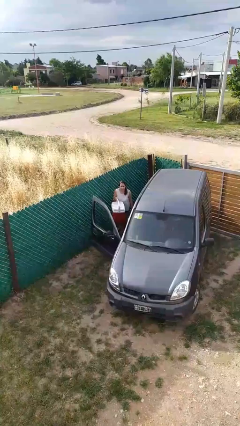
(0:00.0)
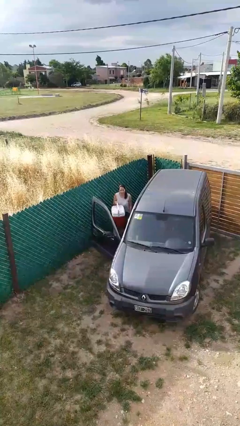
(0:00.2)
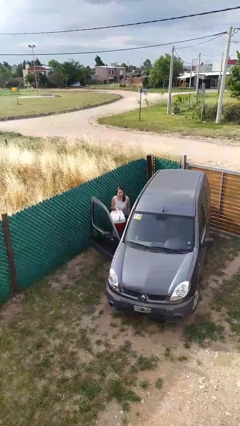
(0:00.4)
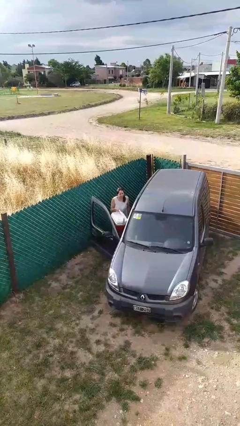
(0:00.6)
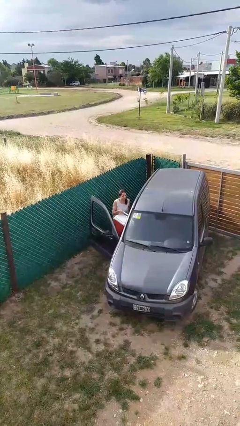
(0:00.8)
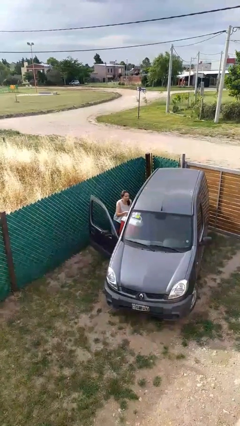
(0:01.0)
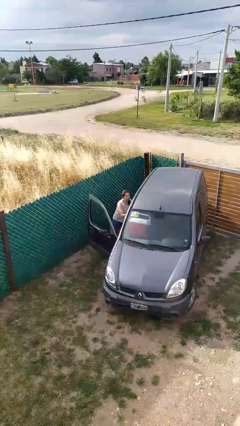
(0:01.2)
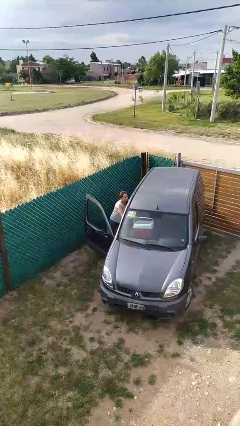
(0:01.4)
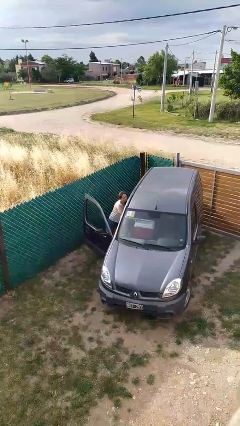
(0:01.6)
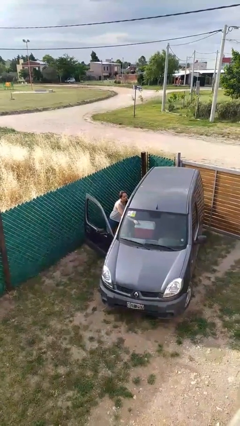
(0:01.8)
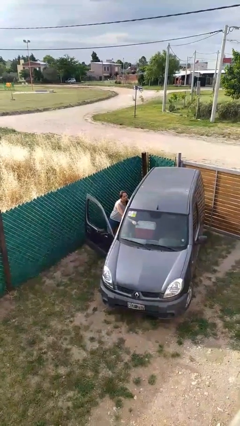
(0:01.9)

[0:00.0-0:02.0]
person loads car

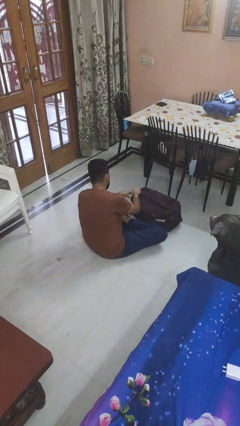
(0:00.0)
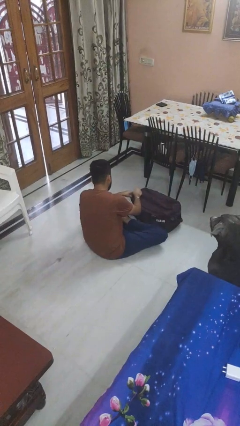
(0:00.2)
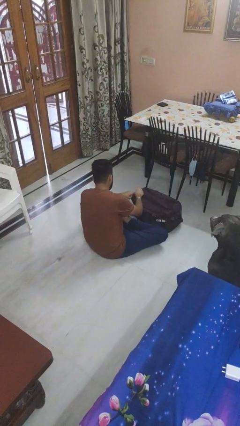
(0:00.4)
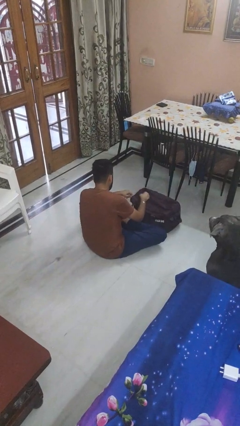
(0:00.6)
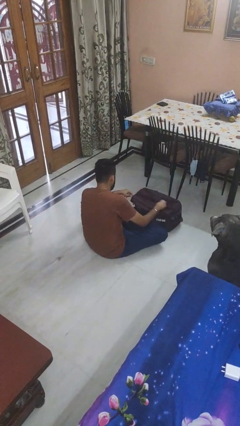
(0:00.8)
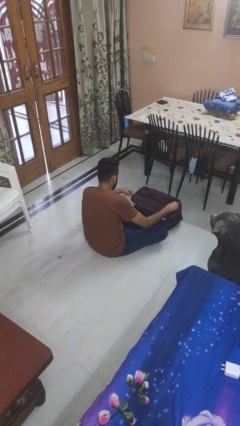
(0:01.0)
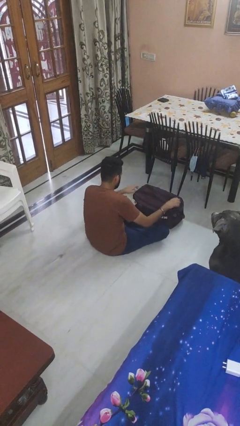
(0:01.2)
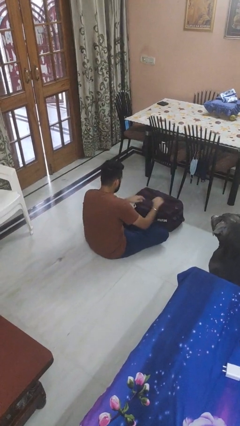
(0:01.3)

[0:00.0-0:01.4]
person opens suitcase

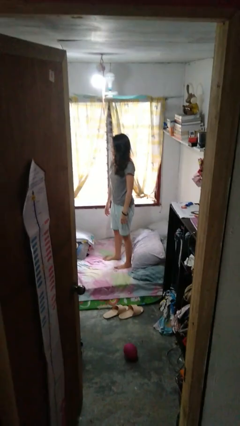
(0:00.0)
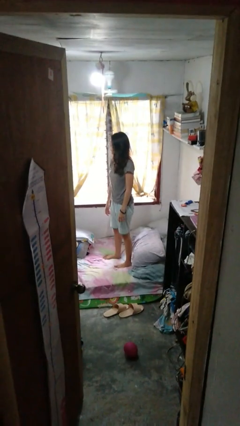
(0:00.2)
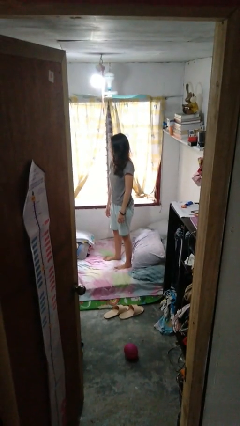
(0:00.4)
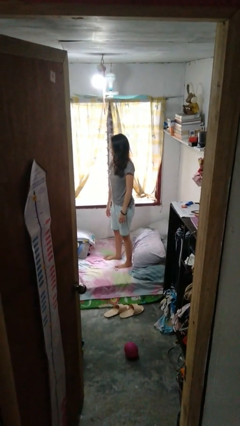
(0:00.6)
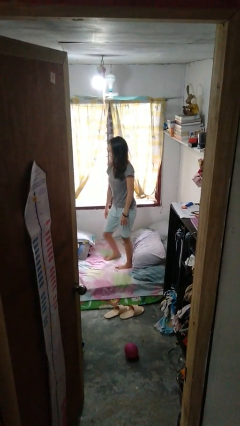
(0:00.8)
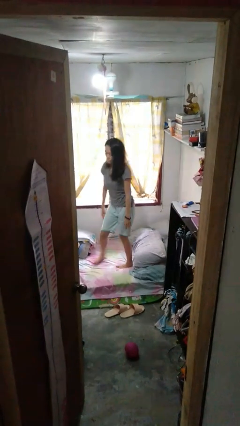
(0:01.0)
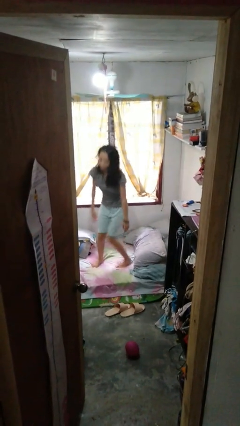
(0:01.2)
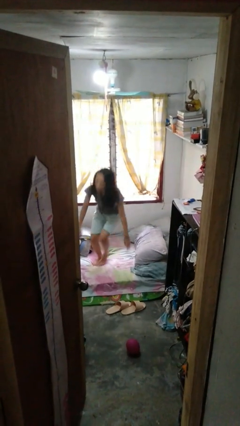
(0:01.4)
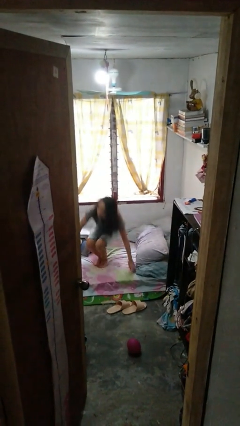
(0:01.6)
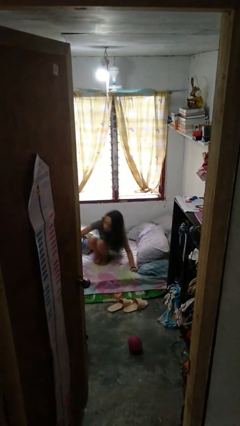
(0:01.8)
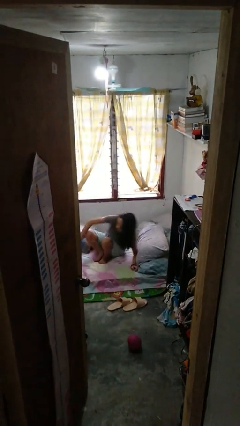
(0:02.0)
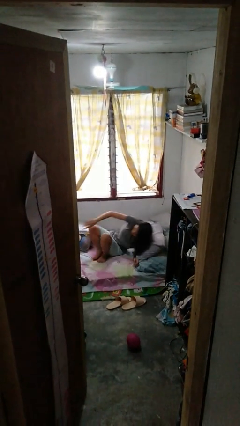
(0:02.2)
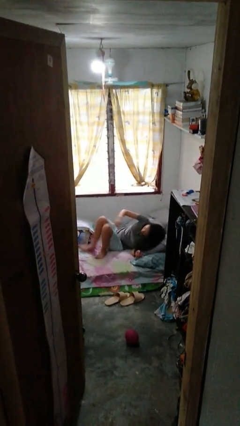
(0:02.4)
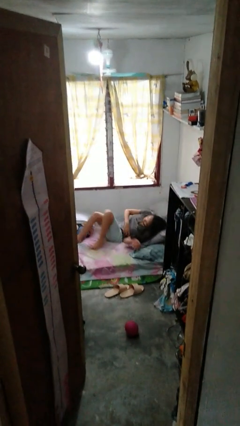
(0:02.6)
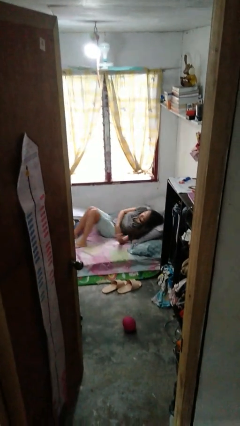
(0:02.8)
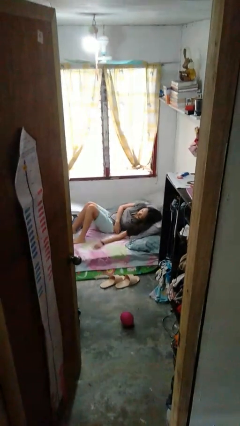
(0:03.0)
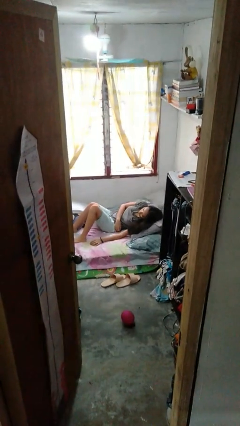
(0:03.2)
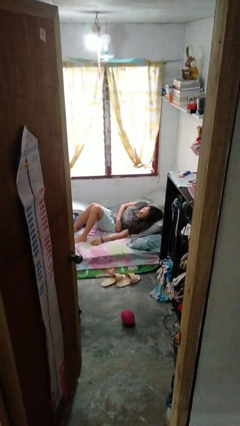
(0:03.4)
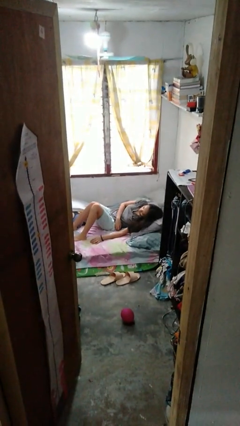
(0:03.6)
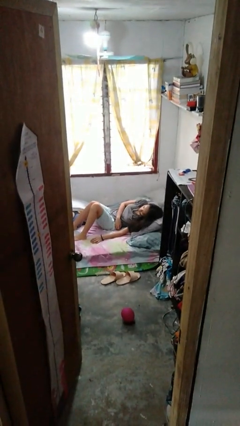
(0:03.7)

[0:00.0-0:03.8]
person lies down on bed

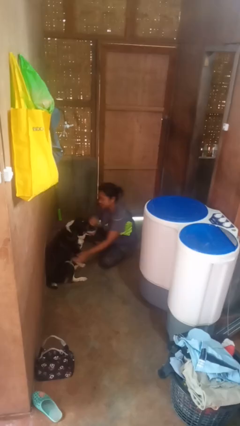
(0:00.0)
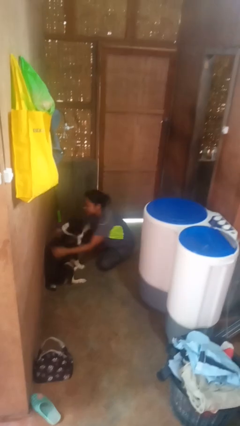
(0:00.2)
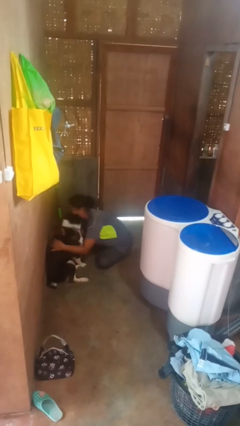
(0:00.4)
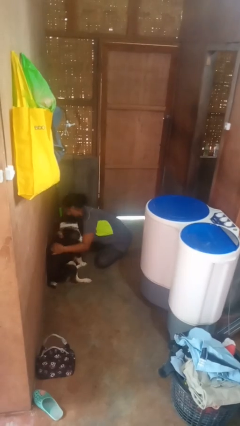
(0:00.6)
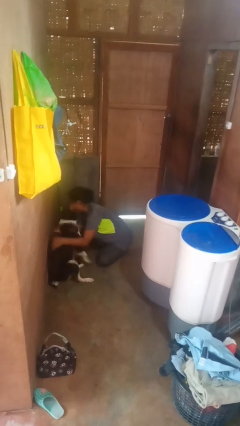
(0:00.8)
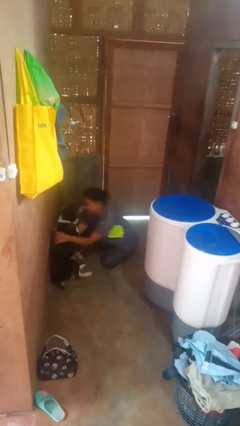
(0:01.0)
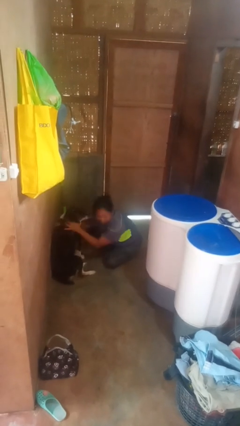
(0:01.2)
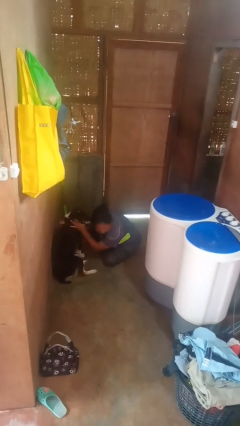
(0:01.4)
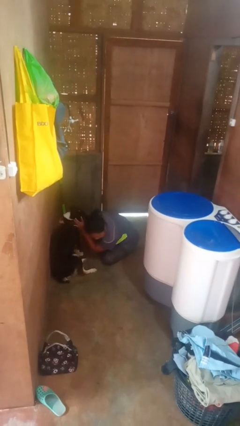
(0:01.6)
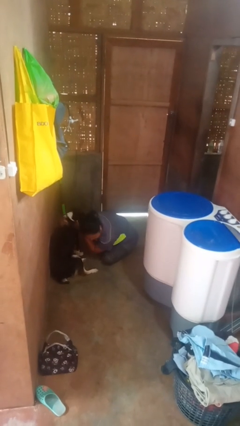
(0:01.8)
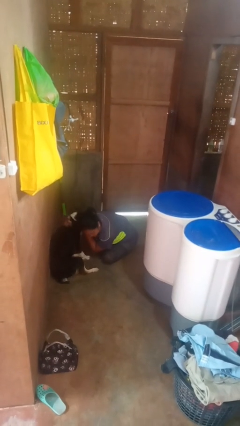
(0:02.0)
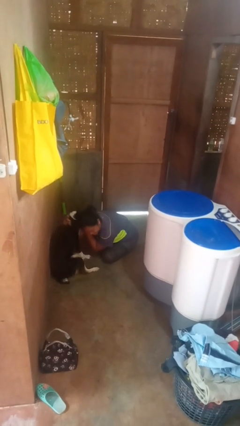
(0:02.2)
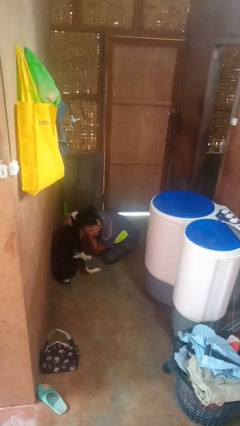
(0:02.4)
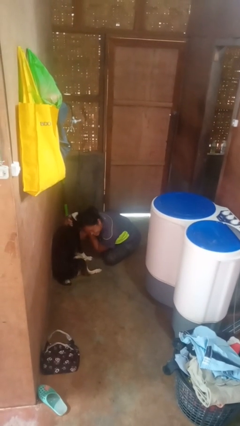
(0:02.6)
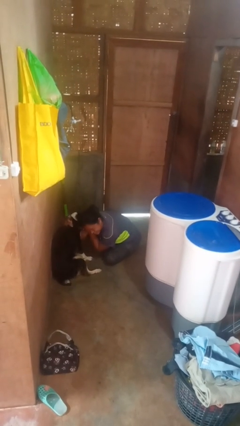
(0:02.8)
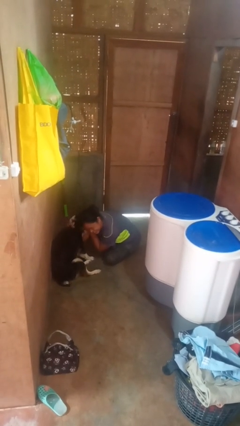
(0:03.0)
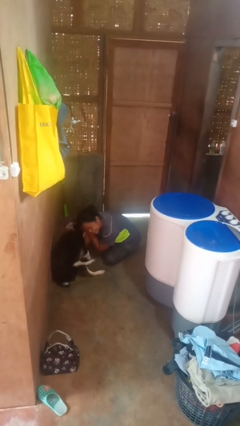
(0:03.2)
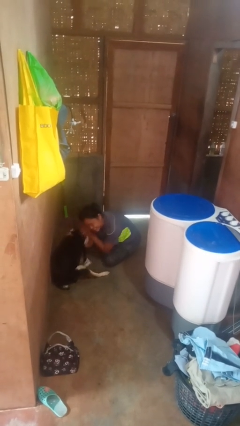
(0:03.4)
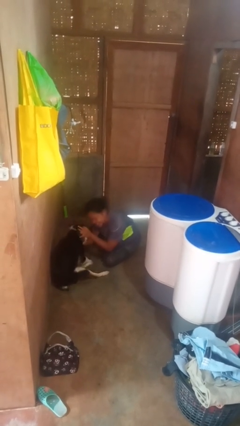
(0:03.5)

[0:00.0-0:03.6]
person hugs dog

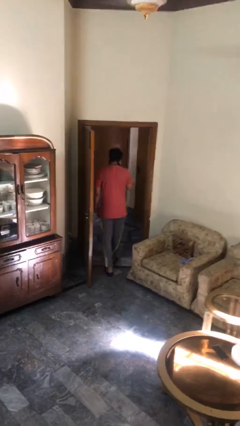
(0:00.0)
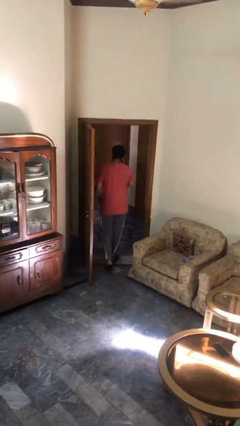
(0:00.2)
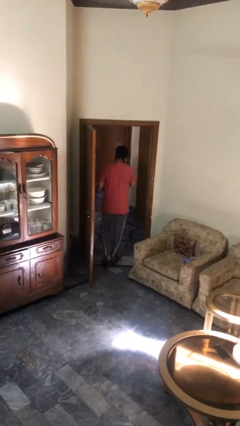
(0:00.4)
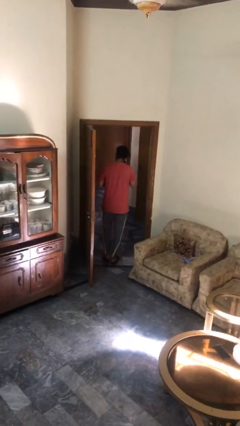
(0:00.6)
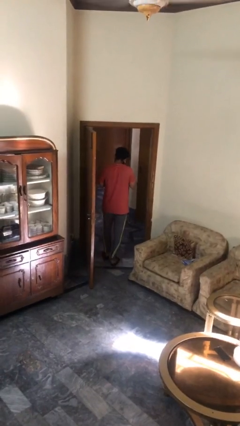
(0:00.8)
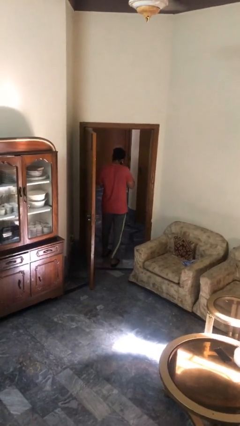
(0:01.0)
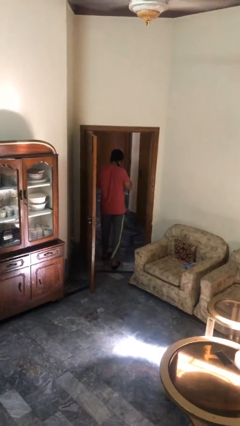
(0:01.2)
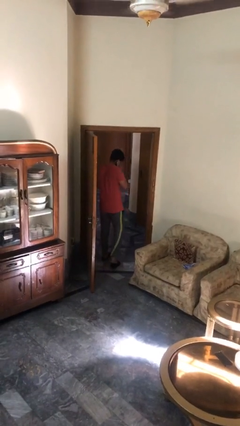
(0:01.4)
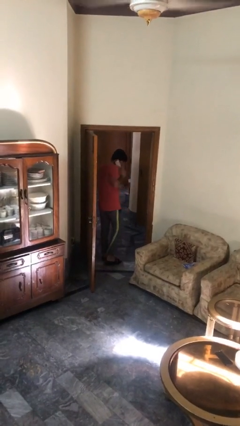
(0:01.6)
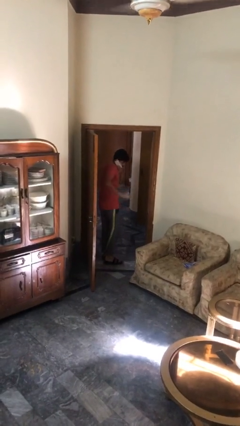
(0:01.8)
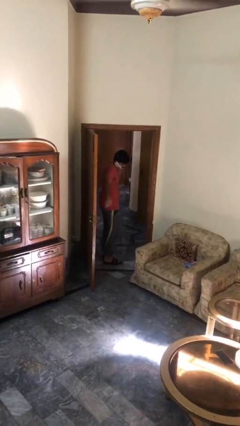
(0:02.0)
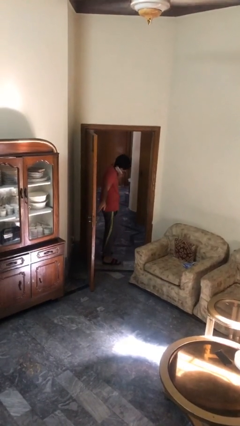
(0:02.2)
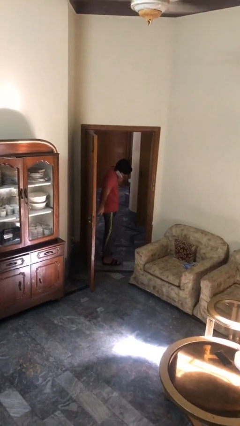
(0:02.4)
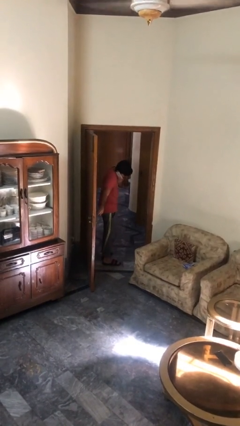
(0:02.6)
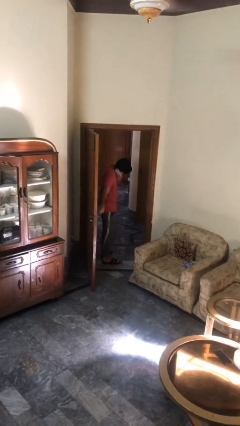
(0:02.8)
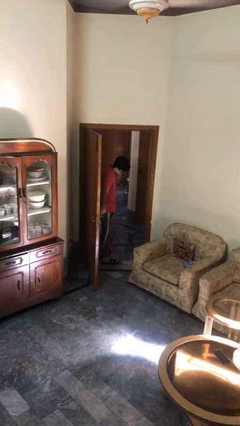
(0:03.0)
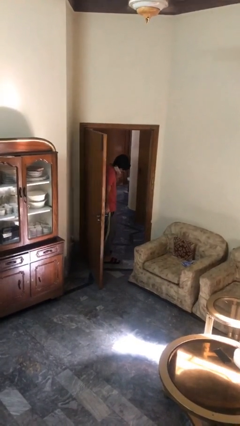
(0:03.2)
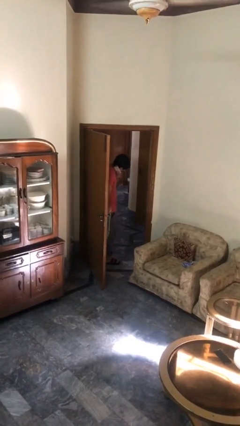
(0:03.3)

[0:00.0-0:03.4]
person exits scene through structure

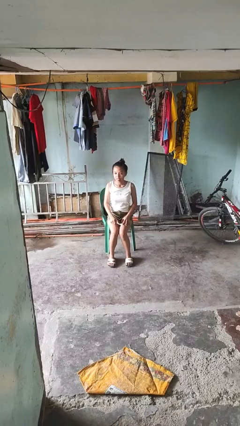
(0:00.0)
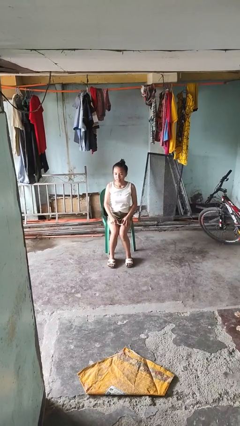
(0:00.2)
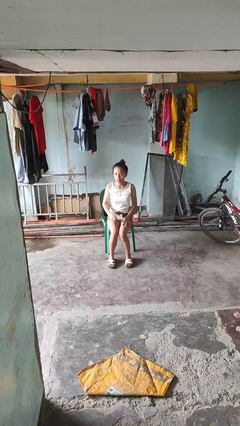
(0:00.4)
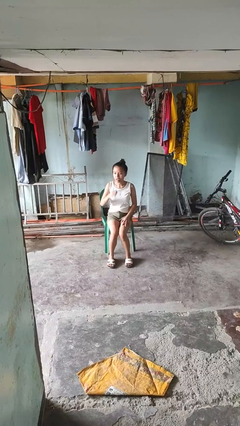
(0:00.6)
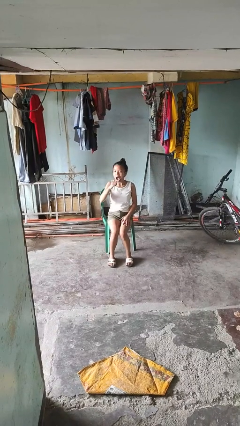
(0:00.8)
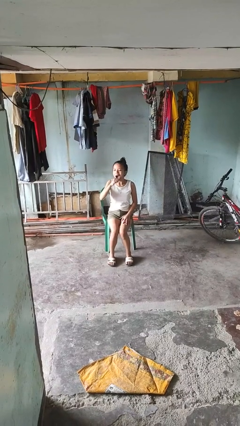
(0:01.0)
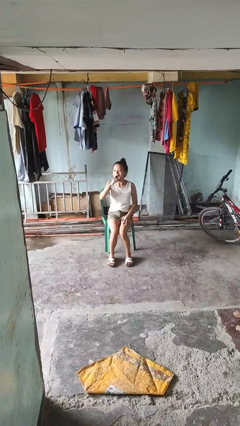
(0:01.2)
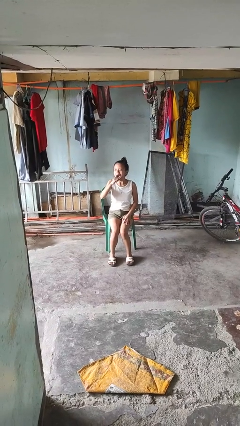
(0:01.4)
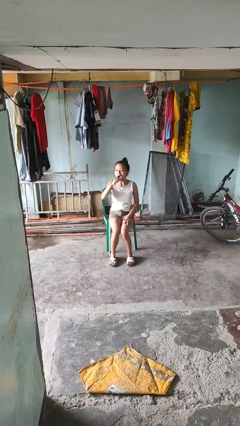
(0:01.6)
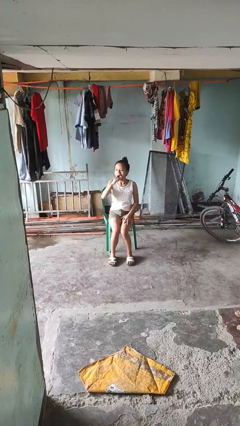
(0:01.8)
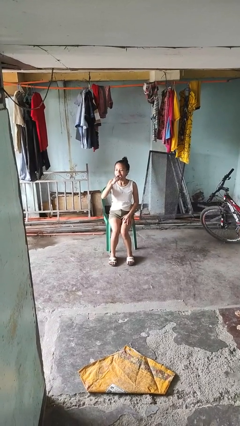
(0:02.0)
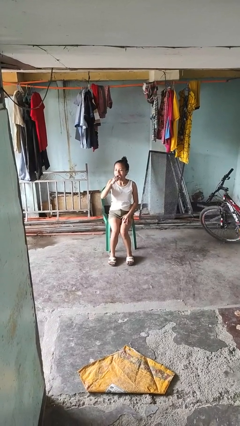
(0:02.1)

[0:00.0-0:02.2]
person brushes teeth

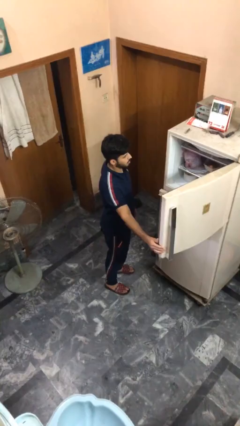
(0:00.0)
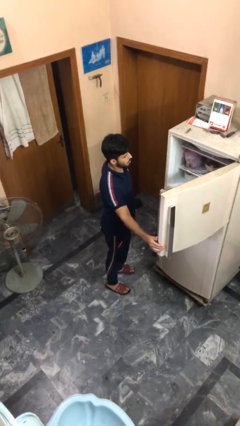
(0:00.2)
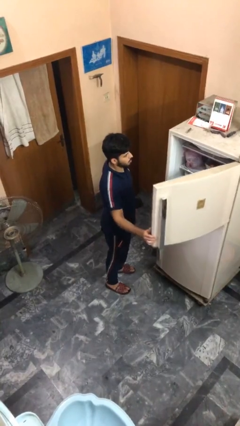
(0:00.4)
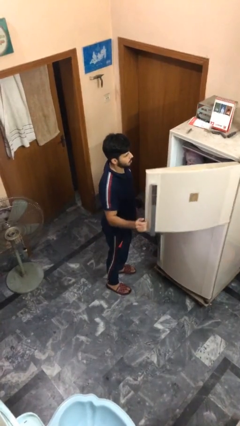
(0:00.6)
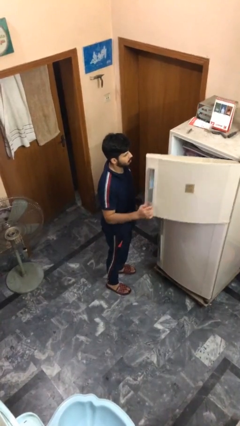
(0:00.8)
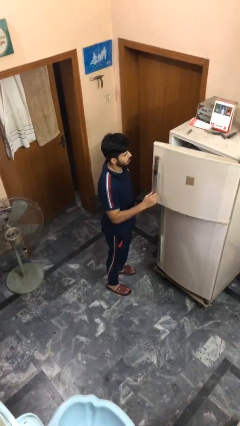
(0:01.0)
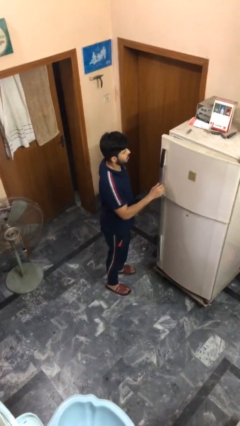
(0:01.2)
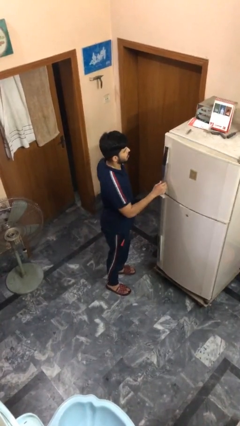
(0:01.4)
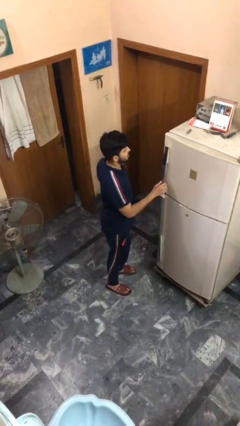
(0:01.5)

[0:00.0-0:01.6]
person closes refrigerator
